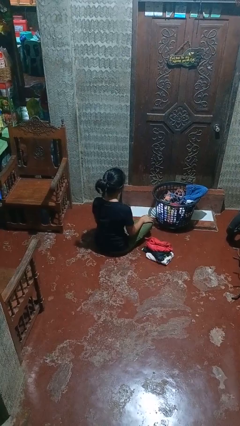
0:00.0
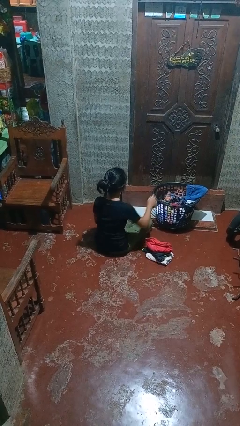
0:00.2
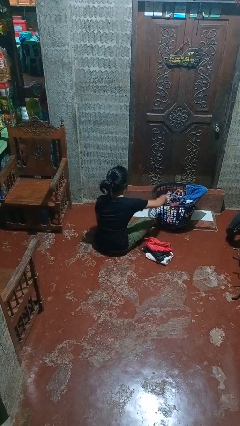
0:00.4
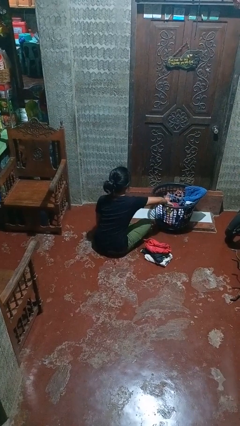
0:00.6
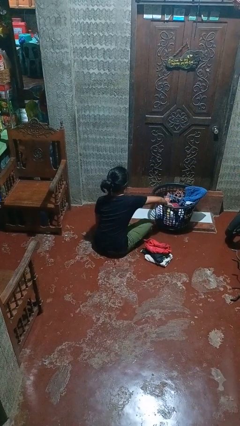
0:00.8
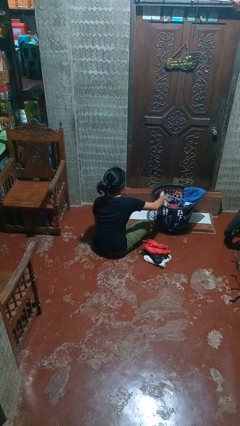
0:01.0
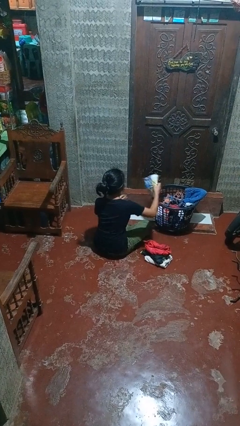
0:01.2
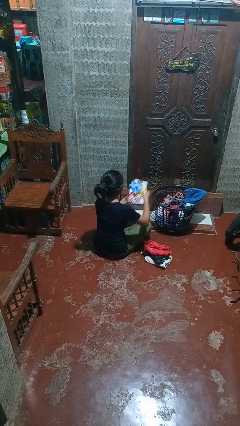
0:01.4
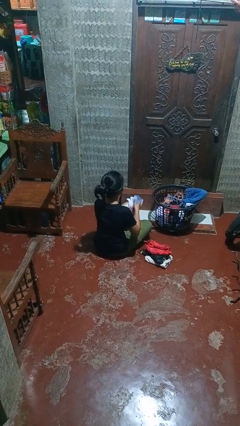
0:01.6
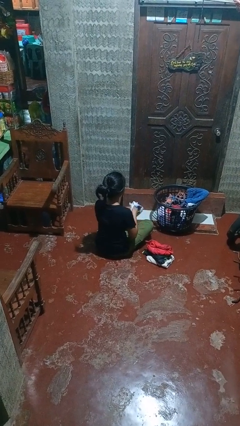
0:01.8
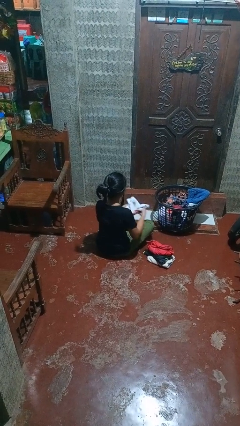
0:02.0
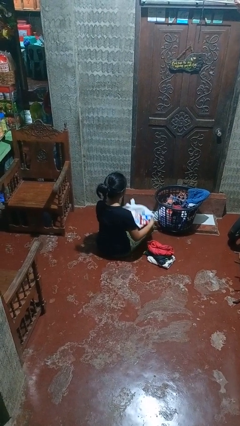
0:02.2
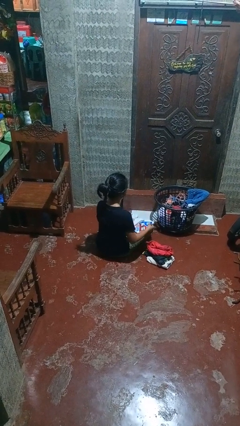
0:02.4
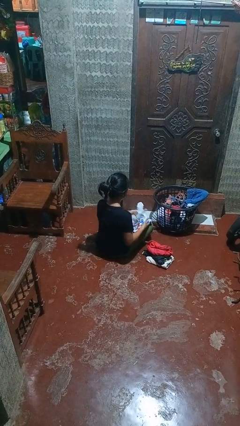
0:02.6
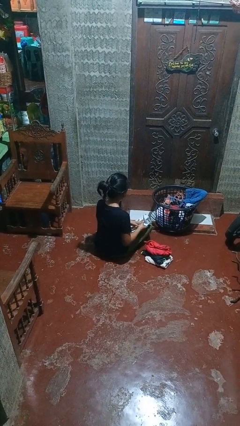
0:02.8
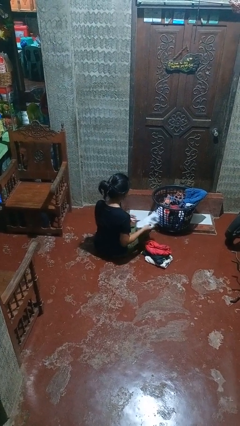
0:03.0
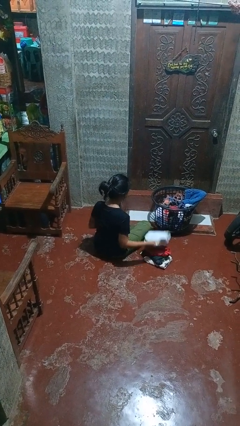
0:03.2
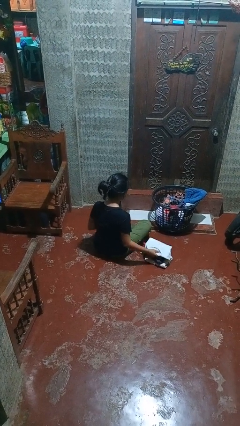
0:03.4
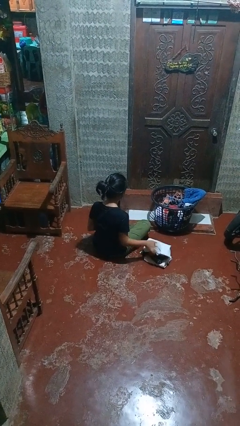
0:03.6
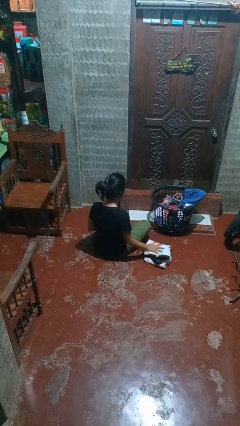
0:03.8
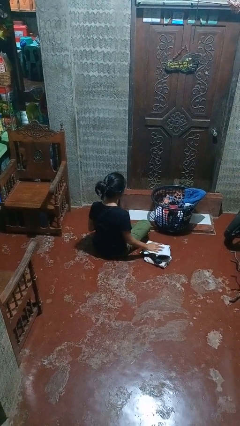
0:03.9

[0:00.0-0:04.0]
person folds shirt

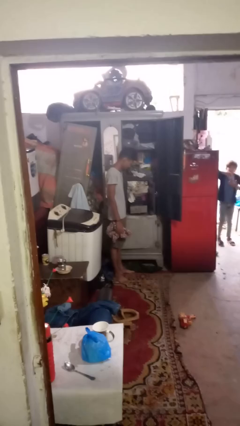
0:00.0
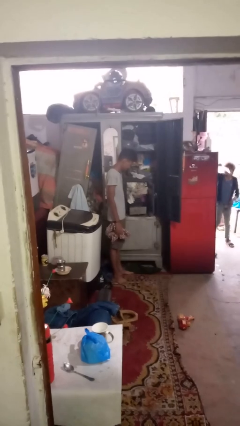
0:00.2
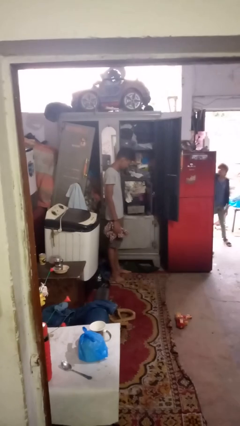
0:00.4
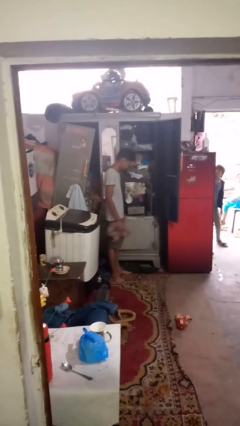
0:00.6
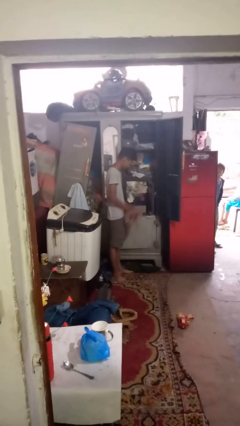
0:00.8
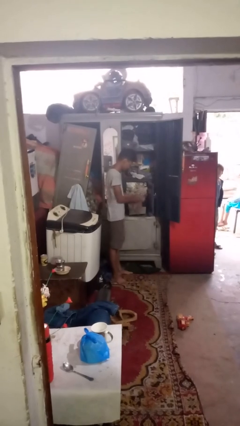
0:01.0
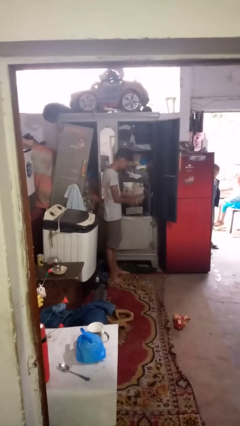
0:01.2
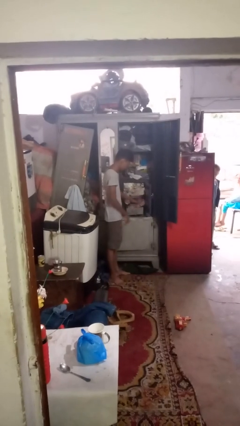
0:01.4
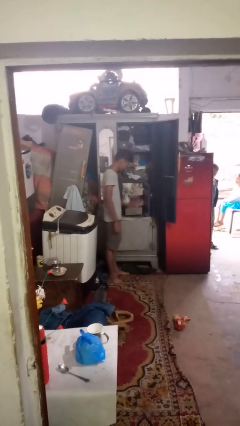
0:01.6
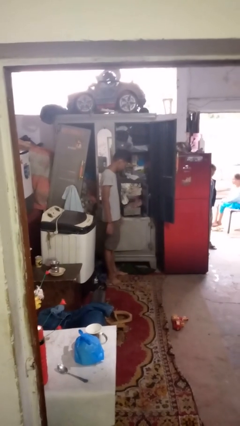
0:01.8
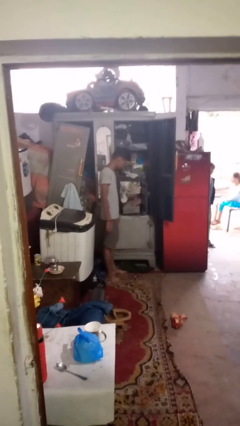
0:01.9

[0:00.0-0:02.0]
person puts clothes into dresser

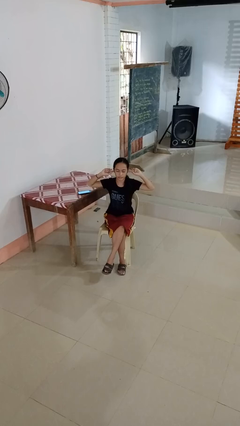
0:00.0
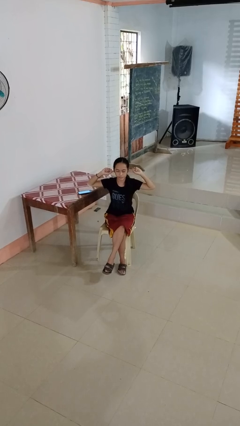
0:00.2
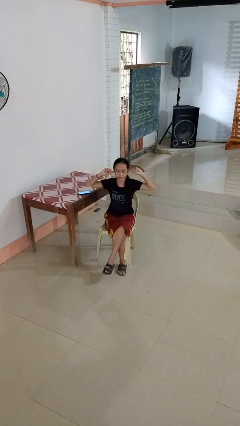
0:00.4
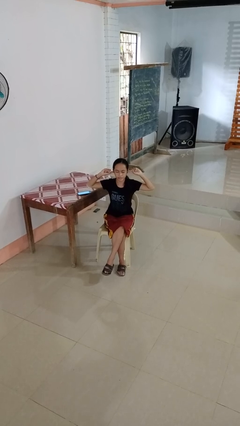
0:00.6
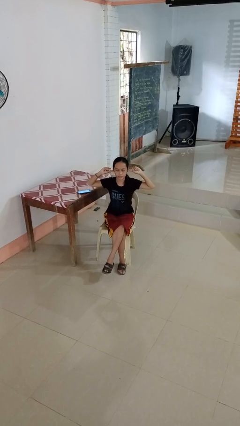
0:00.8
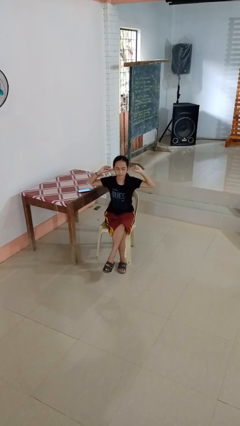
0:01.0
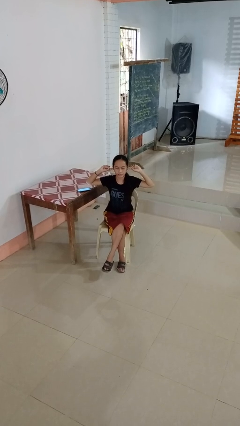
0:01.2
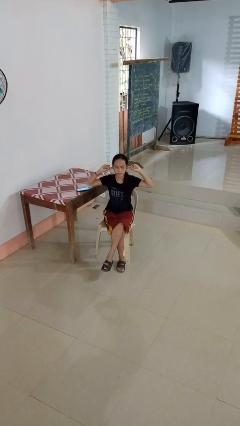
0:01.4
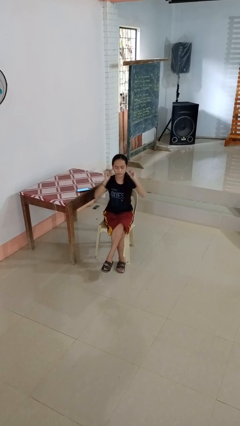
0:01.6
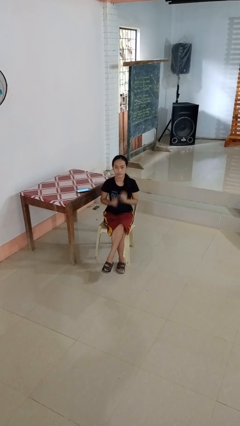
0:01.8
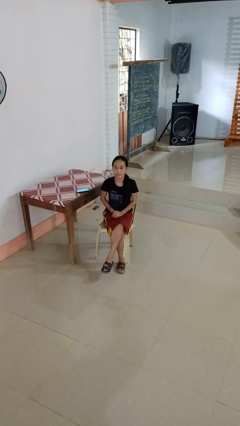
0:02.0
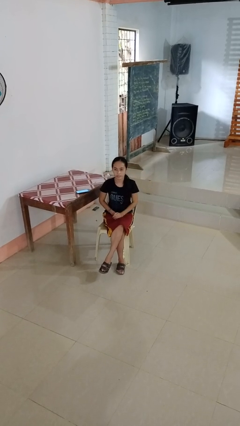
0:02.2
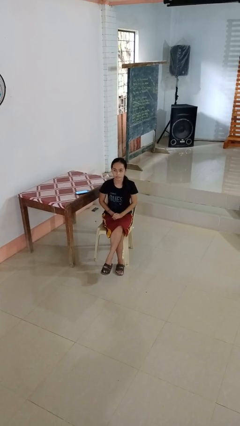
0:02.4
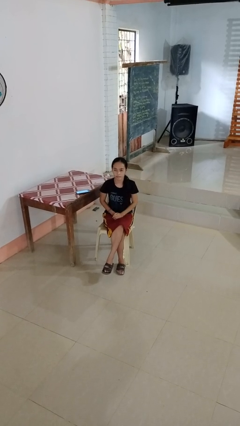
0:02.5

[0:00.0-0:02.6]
person puts fingers in ear

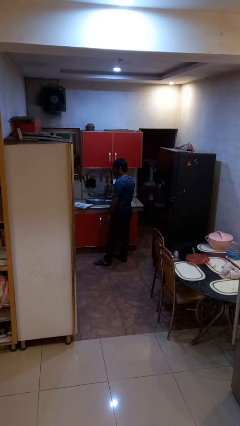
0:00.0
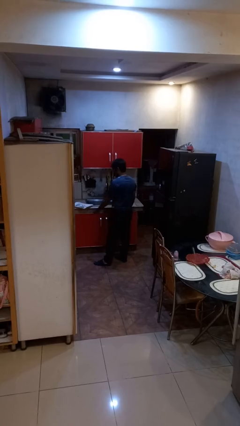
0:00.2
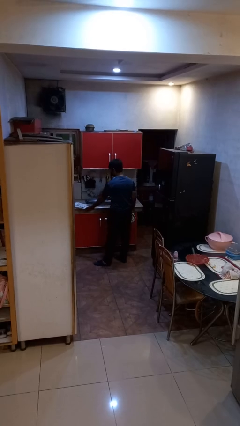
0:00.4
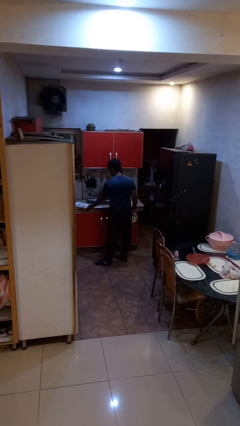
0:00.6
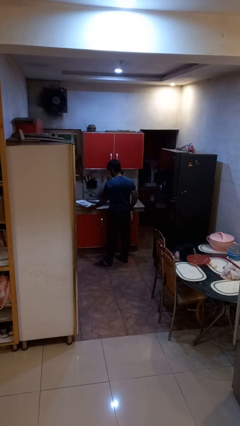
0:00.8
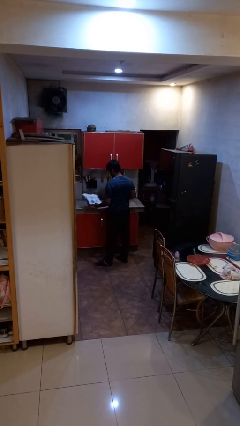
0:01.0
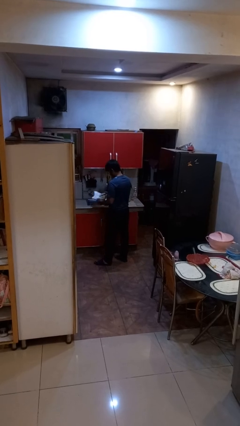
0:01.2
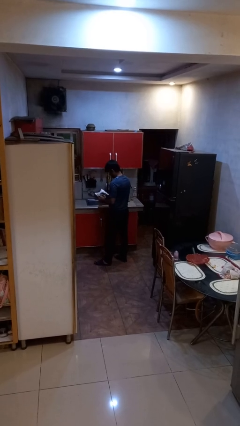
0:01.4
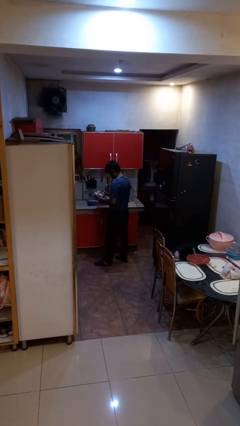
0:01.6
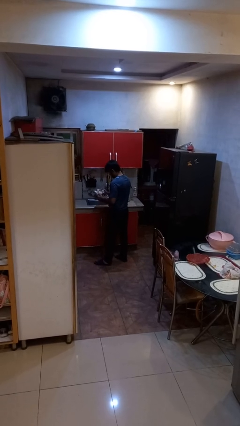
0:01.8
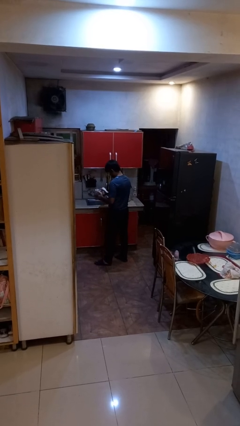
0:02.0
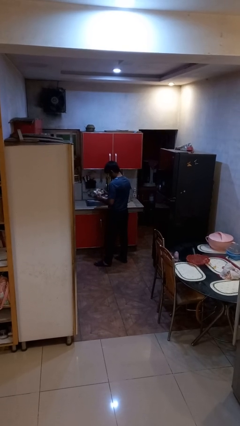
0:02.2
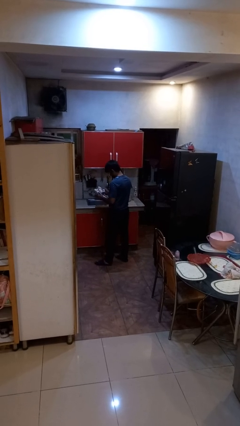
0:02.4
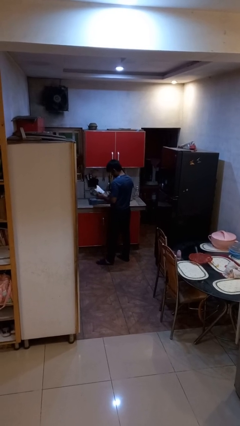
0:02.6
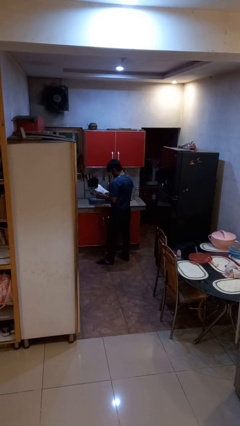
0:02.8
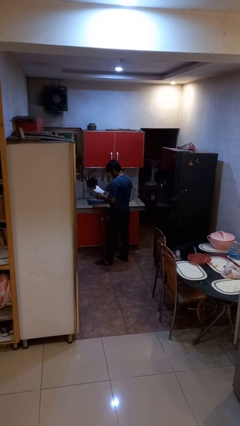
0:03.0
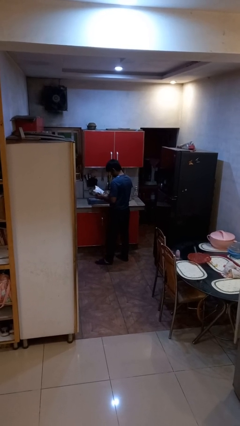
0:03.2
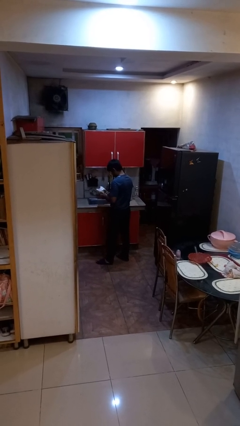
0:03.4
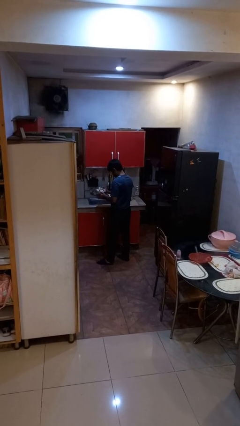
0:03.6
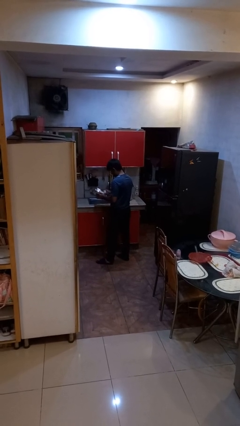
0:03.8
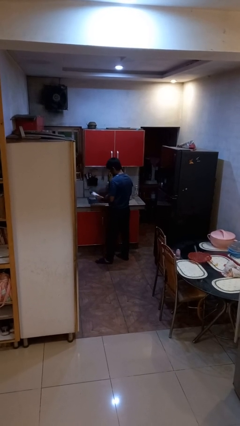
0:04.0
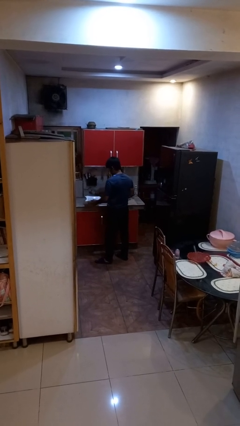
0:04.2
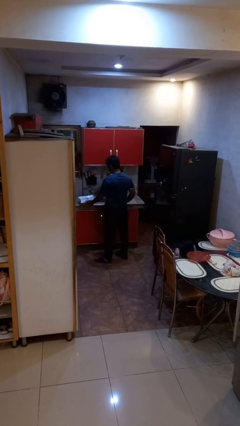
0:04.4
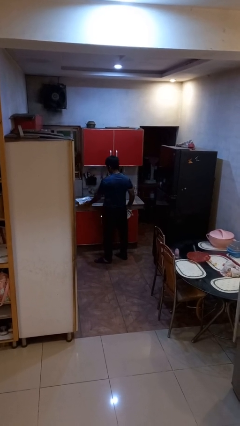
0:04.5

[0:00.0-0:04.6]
person dries dish

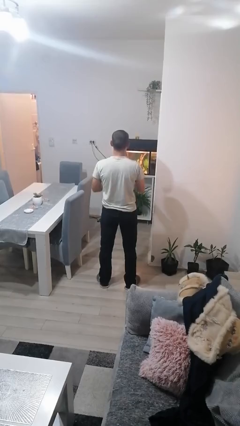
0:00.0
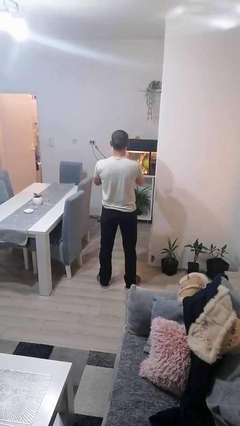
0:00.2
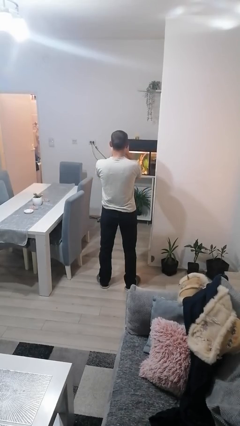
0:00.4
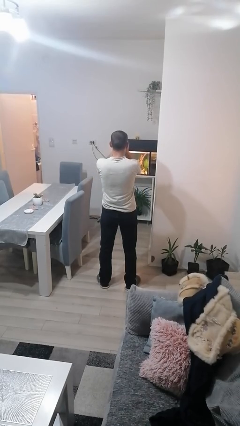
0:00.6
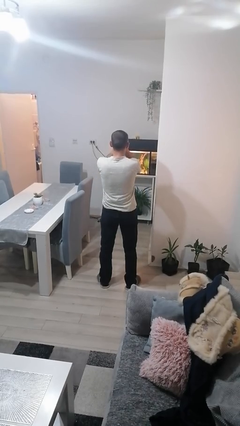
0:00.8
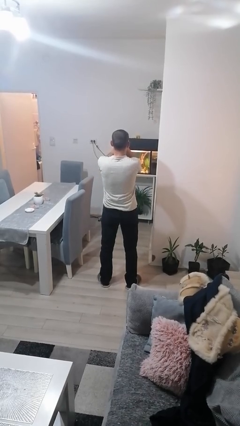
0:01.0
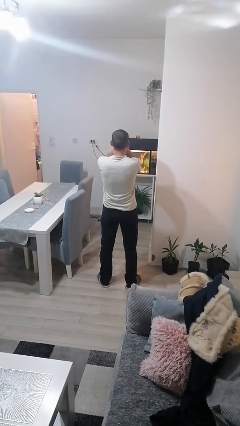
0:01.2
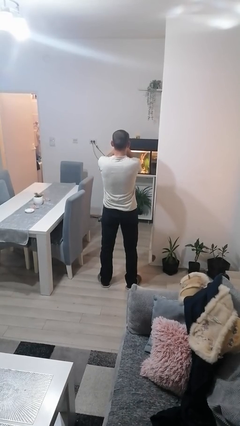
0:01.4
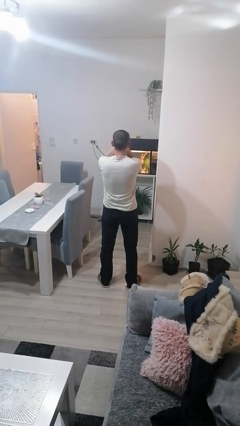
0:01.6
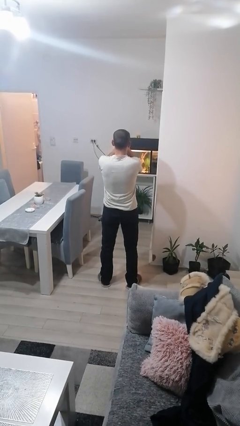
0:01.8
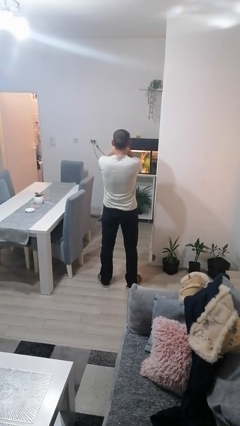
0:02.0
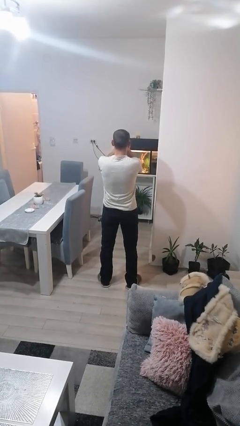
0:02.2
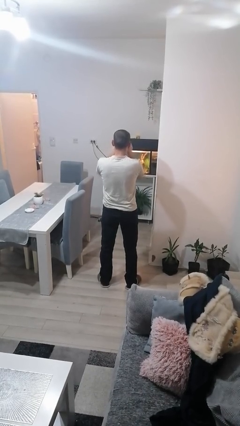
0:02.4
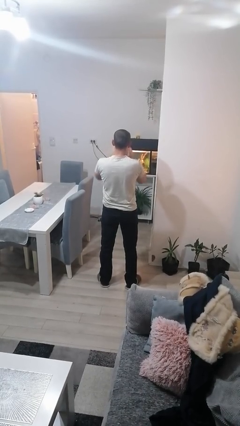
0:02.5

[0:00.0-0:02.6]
person covers face with hands

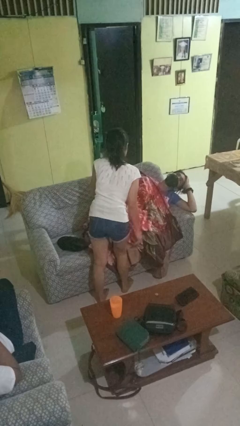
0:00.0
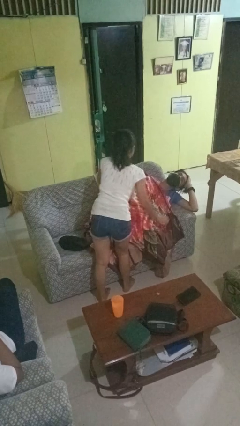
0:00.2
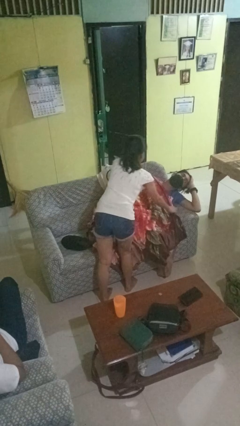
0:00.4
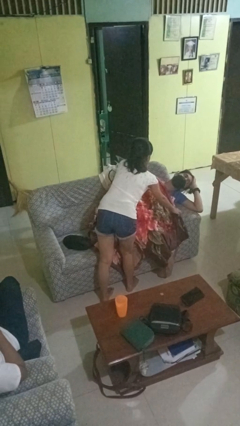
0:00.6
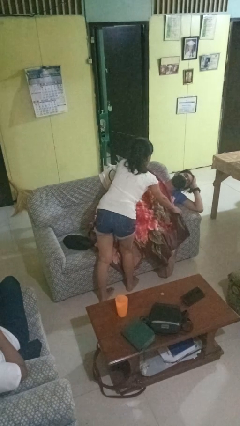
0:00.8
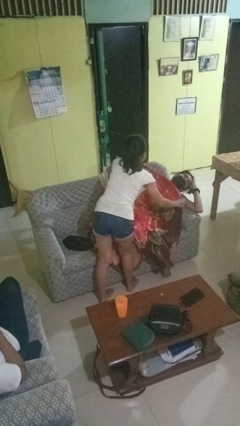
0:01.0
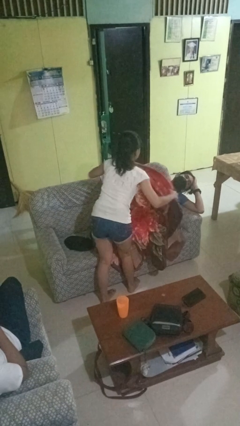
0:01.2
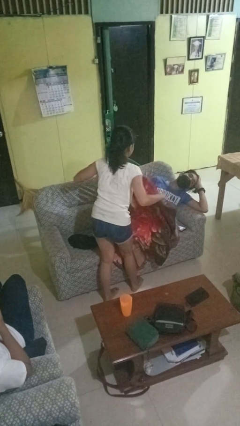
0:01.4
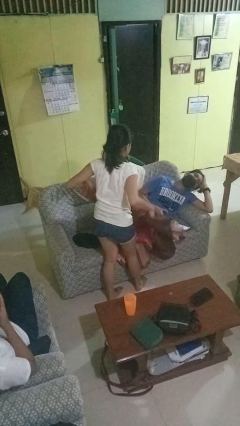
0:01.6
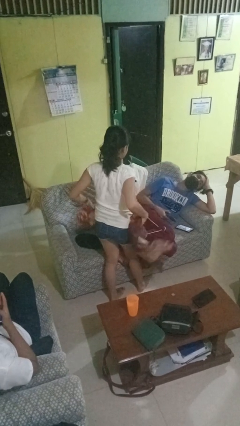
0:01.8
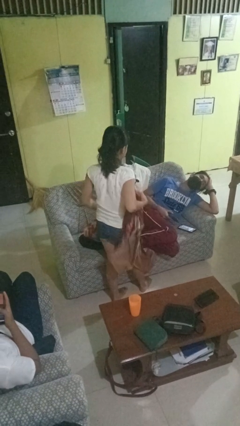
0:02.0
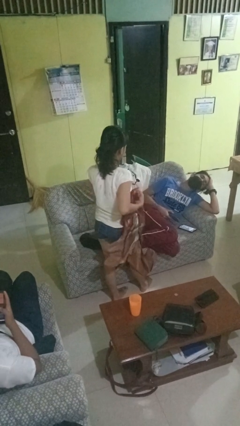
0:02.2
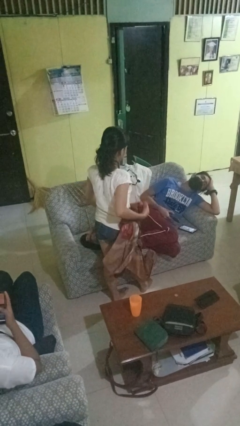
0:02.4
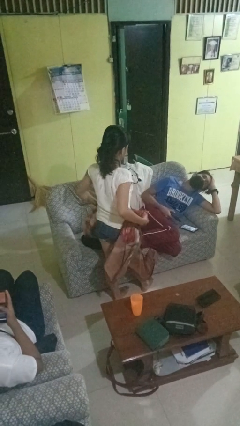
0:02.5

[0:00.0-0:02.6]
person uncovers friend with blanket
